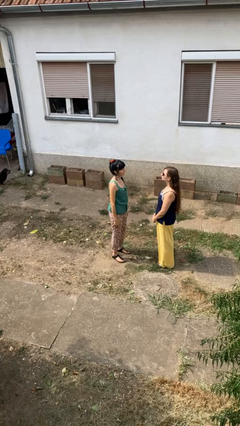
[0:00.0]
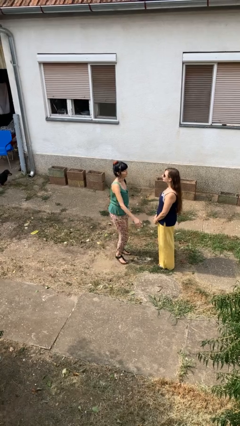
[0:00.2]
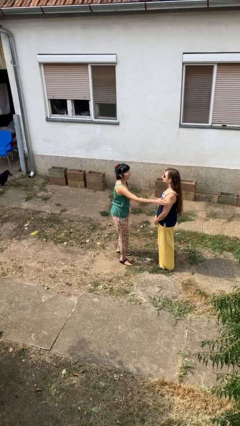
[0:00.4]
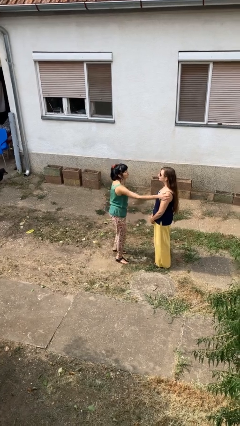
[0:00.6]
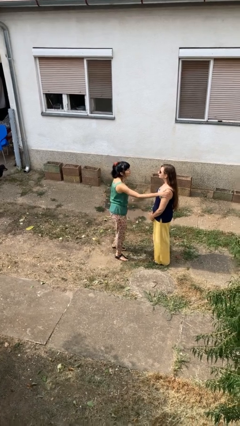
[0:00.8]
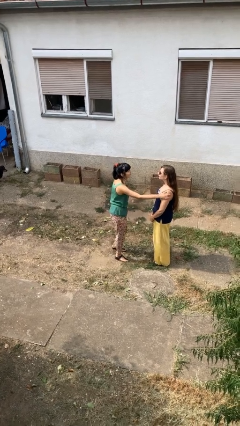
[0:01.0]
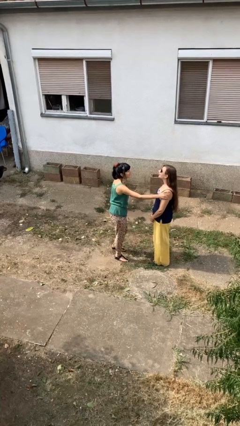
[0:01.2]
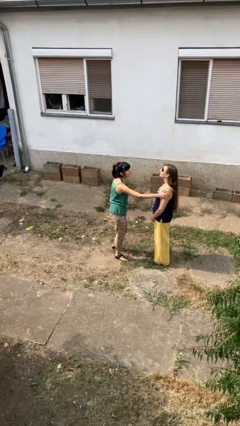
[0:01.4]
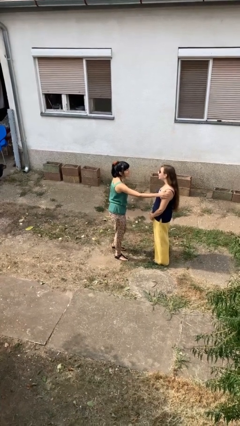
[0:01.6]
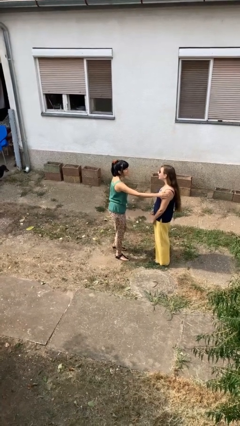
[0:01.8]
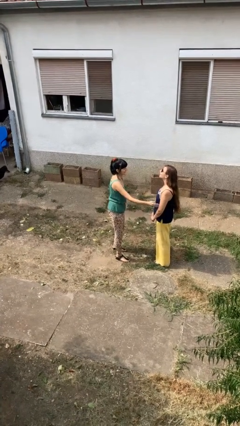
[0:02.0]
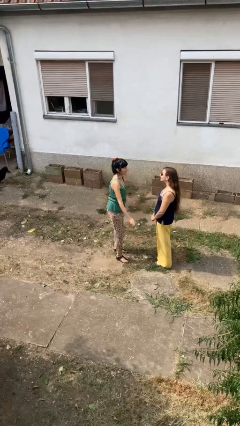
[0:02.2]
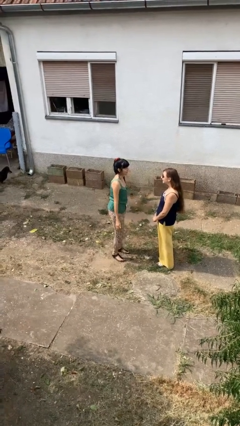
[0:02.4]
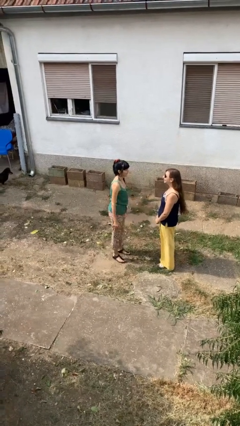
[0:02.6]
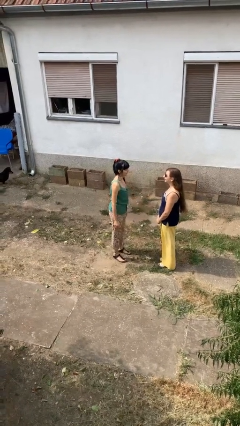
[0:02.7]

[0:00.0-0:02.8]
person pounds shoulders of person

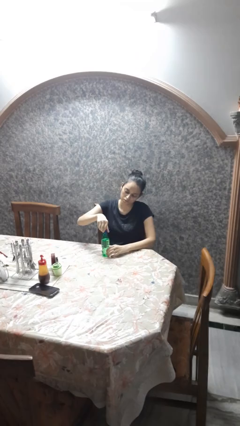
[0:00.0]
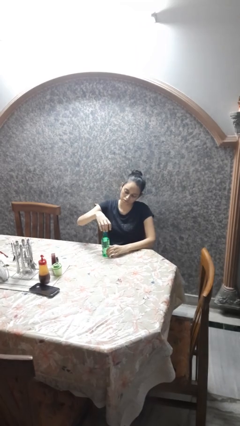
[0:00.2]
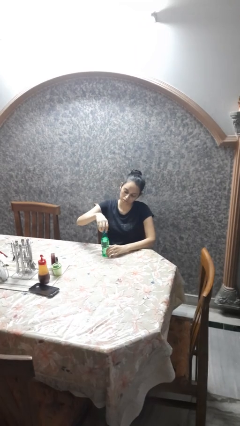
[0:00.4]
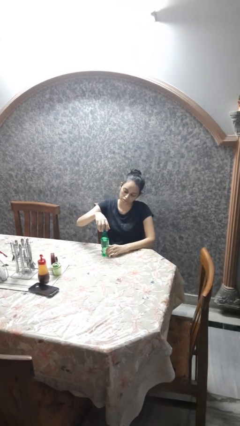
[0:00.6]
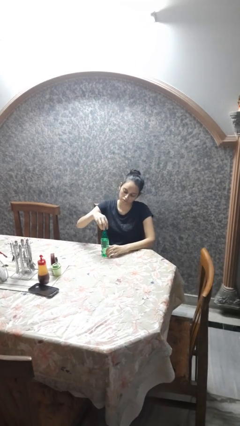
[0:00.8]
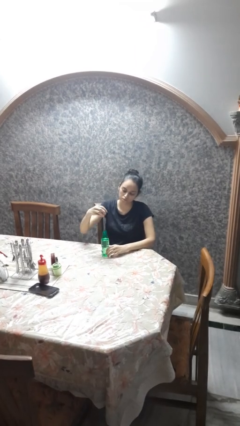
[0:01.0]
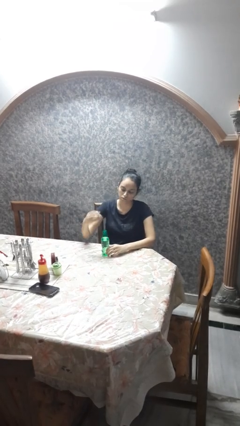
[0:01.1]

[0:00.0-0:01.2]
person unscrews lid from bottle

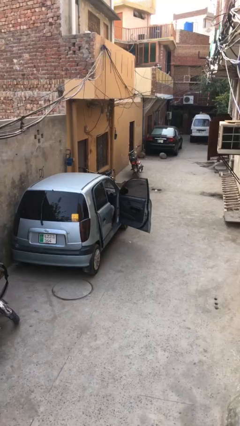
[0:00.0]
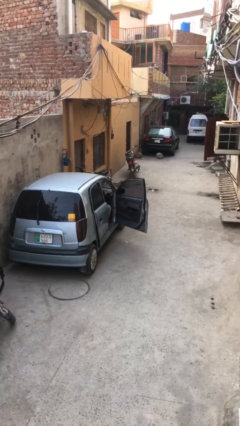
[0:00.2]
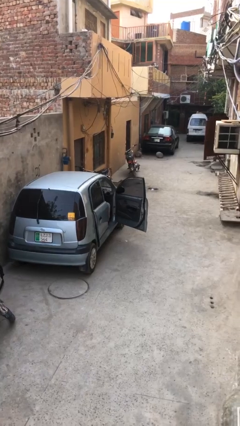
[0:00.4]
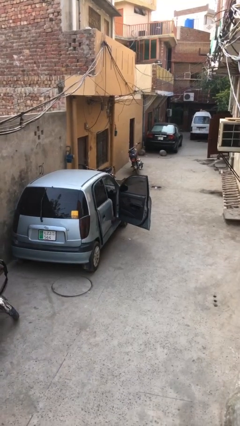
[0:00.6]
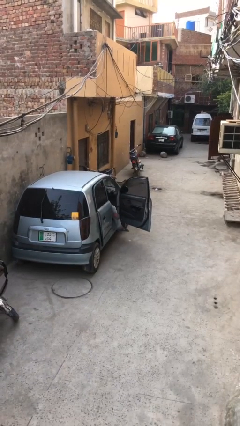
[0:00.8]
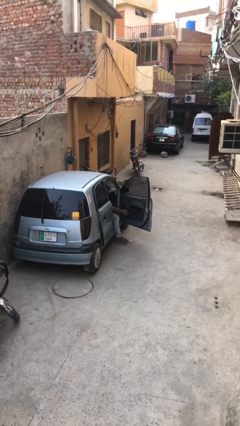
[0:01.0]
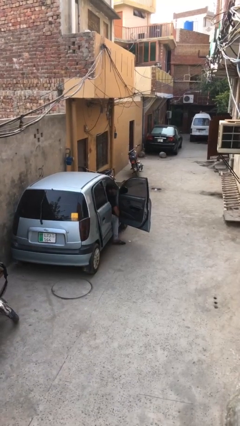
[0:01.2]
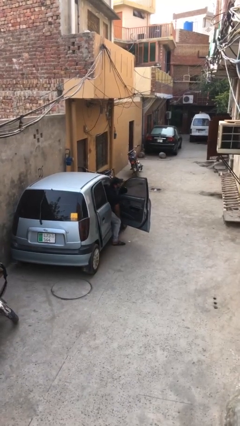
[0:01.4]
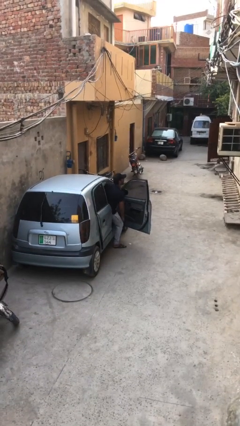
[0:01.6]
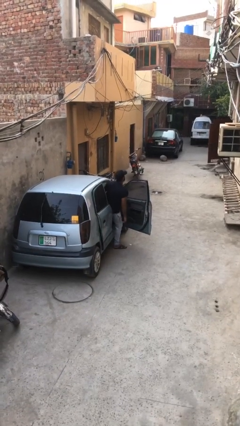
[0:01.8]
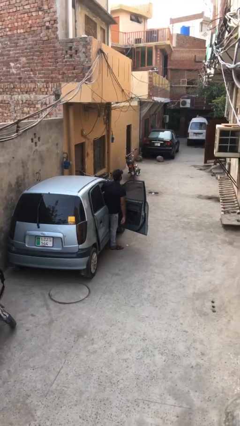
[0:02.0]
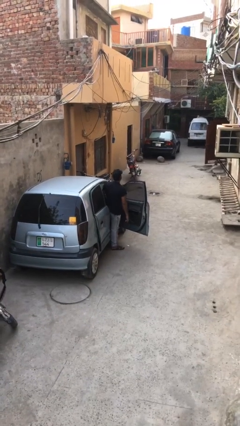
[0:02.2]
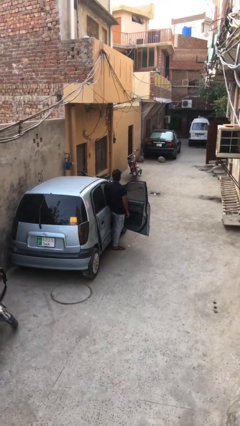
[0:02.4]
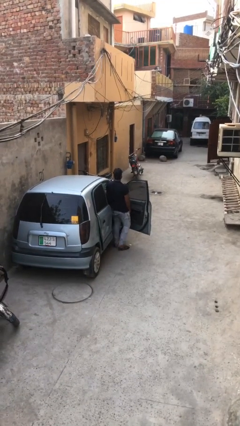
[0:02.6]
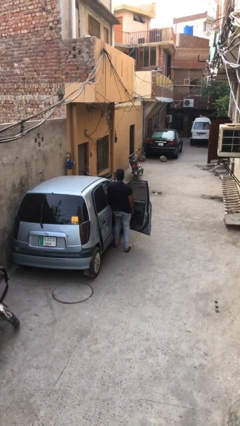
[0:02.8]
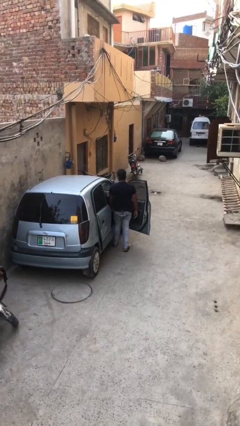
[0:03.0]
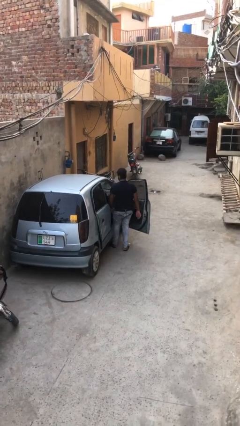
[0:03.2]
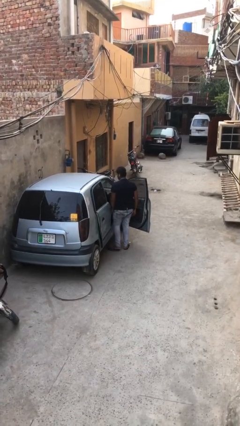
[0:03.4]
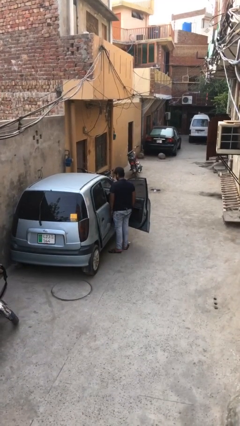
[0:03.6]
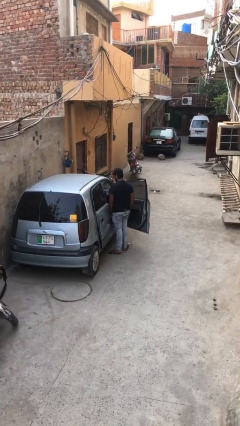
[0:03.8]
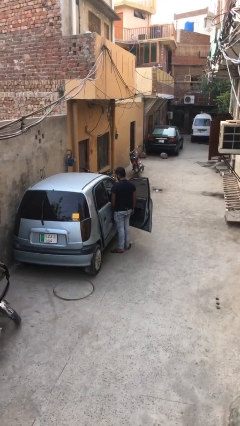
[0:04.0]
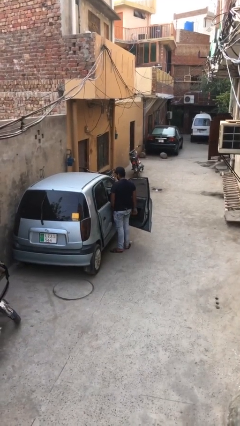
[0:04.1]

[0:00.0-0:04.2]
person exits car

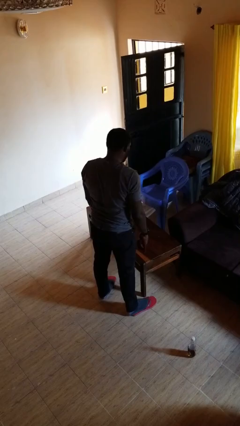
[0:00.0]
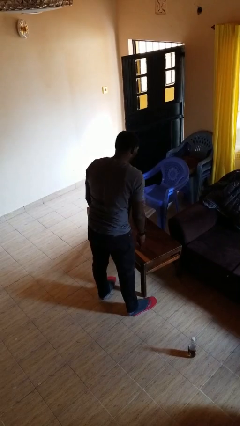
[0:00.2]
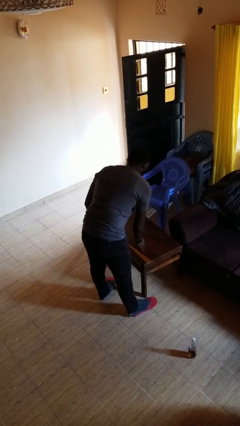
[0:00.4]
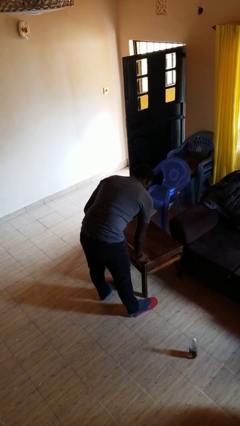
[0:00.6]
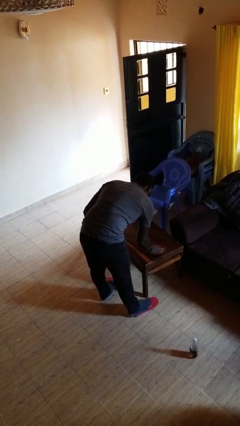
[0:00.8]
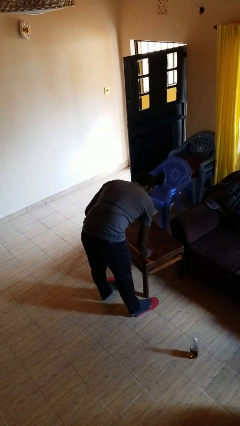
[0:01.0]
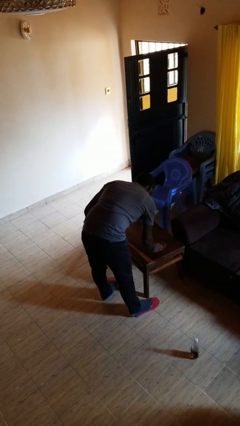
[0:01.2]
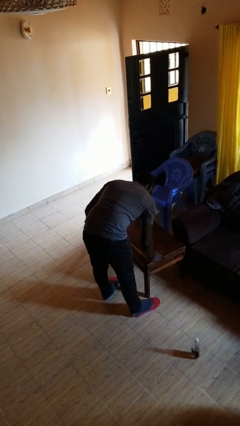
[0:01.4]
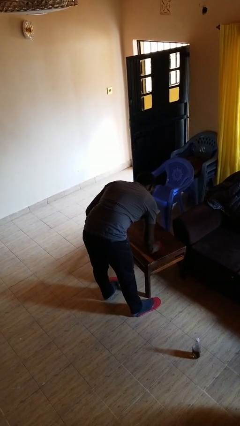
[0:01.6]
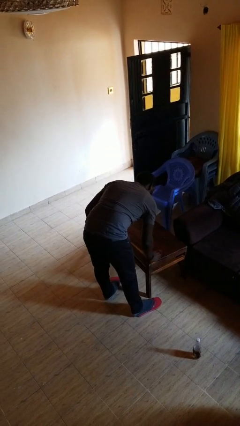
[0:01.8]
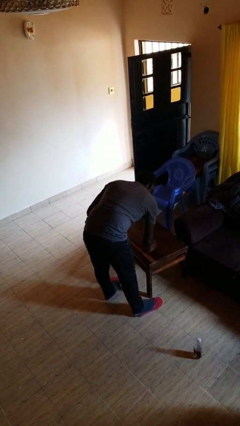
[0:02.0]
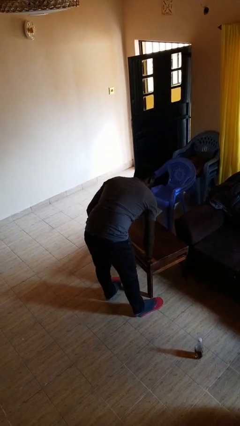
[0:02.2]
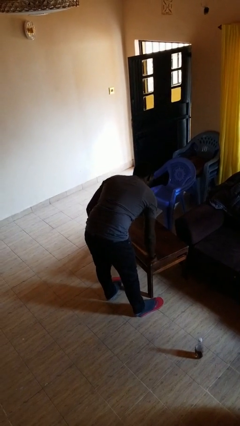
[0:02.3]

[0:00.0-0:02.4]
person cleans table with rag

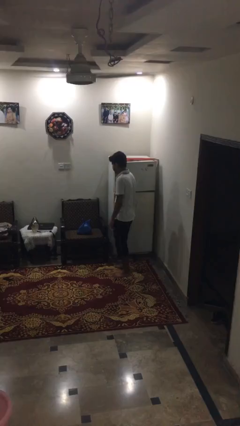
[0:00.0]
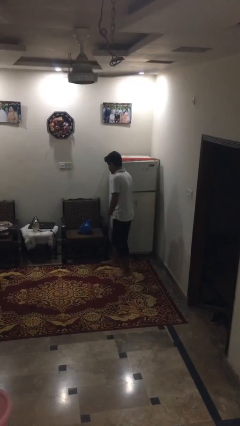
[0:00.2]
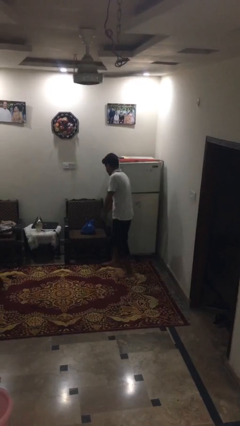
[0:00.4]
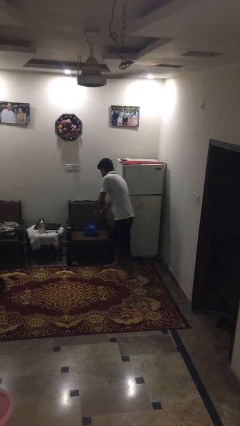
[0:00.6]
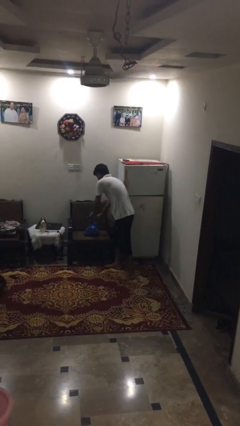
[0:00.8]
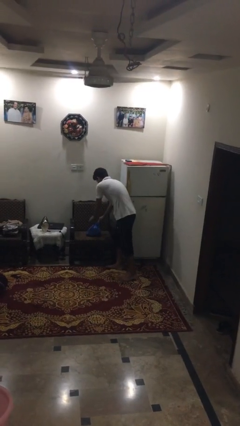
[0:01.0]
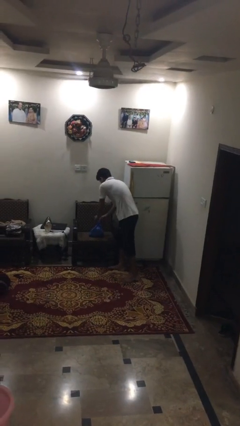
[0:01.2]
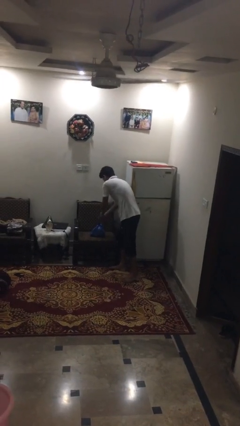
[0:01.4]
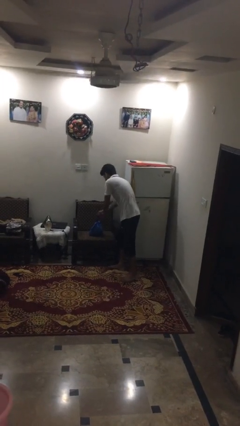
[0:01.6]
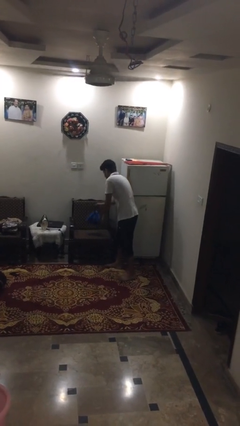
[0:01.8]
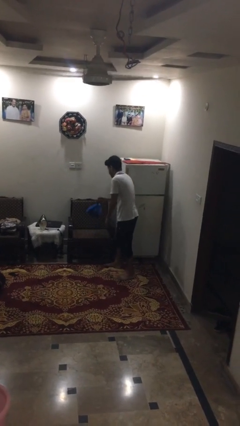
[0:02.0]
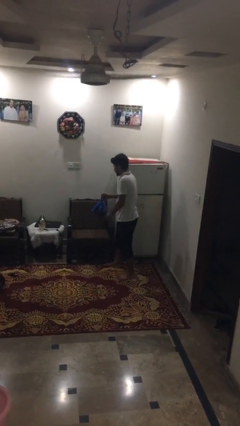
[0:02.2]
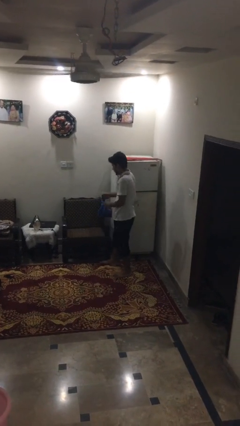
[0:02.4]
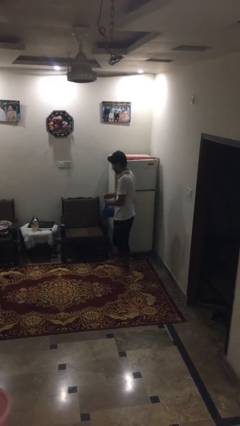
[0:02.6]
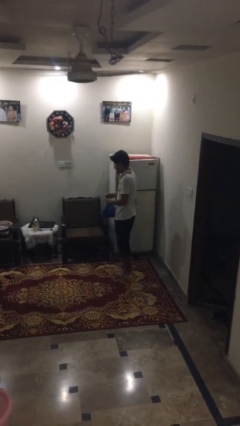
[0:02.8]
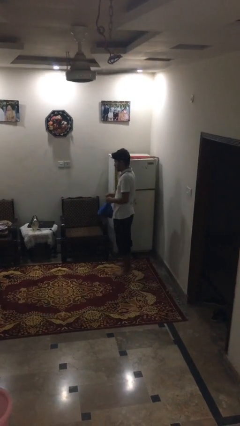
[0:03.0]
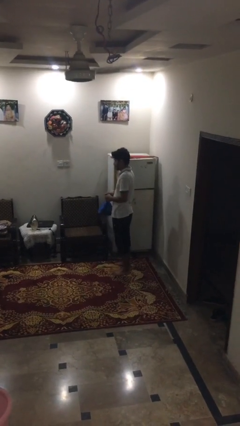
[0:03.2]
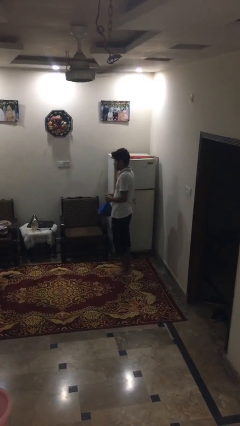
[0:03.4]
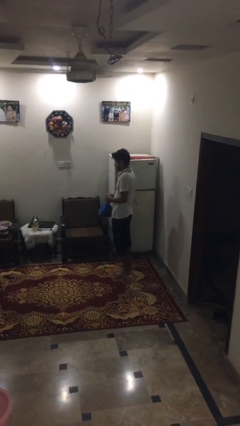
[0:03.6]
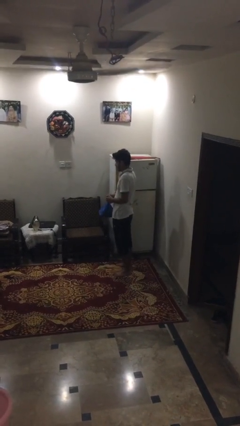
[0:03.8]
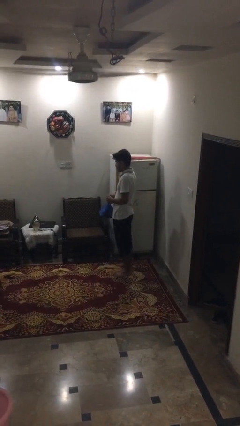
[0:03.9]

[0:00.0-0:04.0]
person picks up object from couch

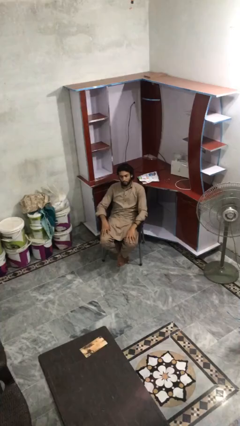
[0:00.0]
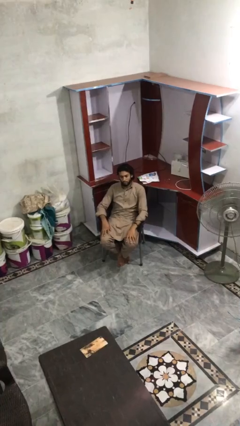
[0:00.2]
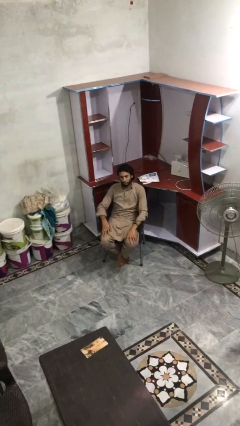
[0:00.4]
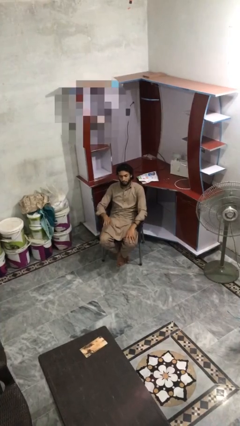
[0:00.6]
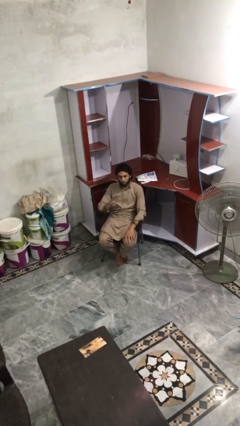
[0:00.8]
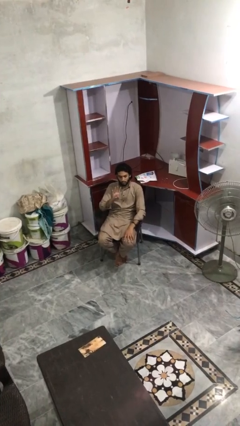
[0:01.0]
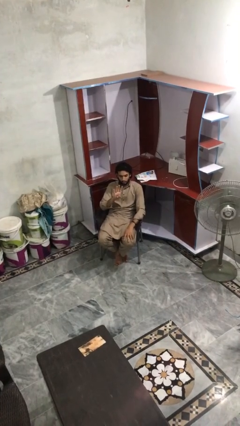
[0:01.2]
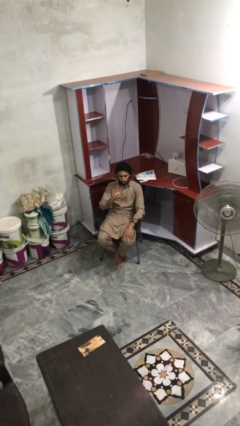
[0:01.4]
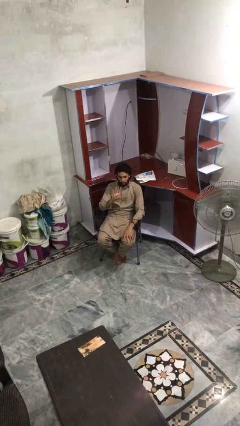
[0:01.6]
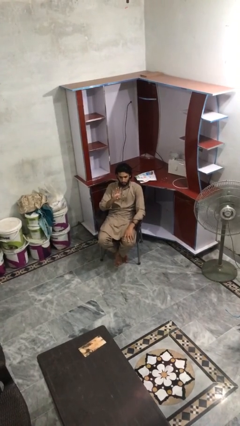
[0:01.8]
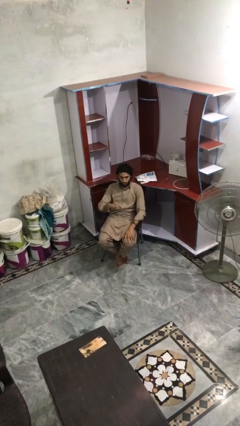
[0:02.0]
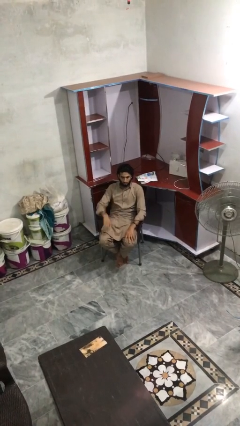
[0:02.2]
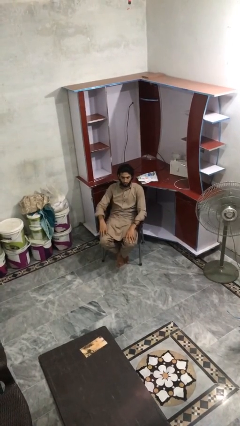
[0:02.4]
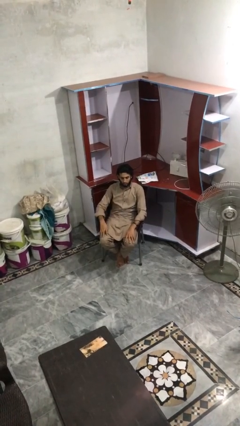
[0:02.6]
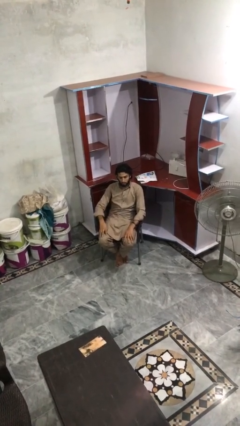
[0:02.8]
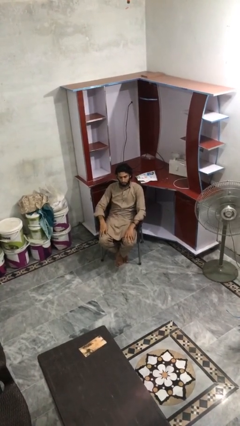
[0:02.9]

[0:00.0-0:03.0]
person gestures number four

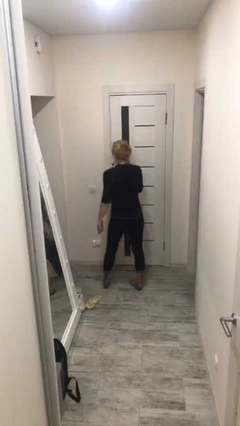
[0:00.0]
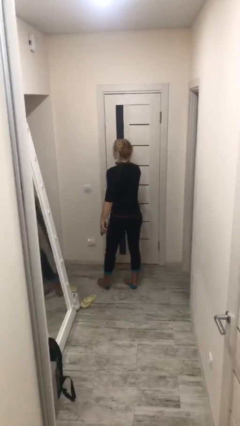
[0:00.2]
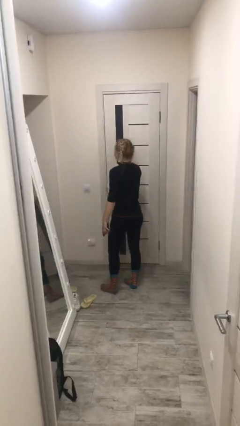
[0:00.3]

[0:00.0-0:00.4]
person closes facility door
